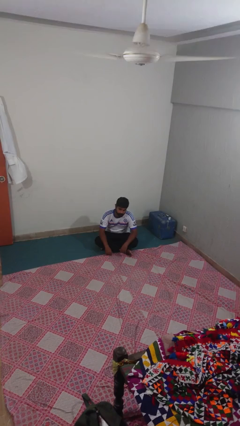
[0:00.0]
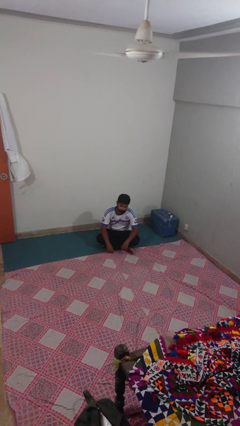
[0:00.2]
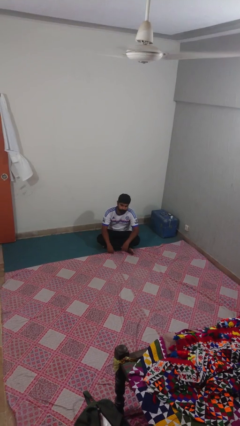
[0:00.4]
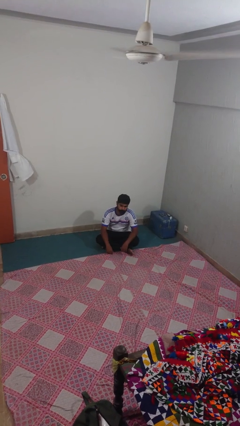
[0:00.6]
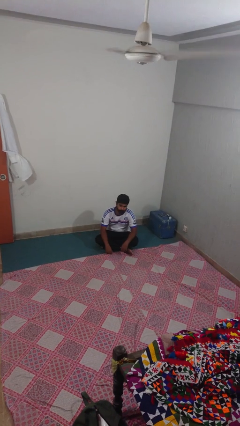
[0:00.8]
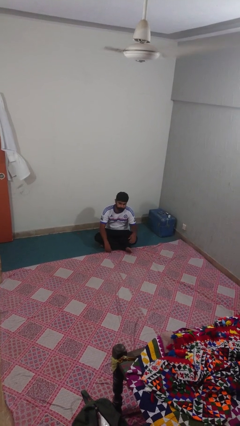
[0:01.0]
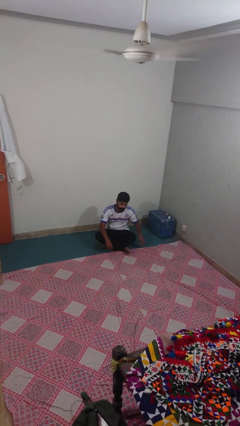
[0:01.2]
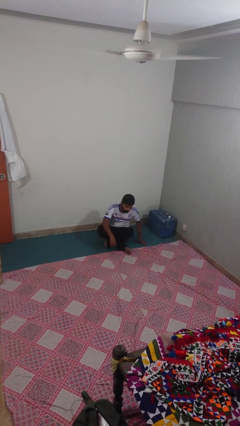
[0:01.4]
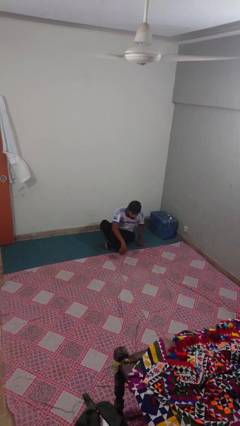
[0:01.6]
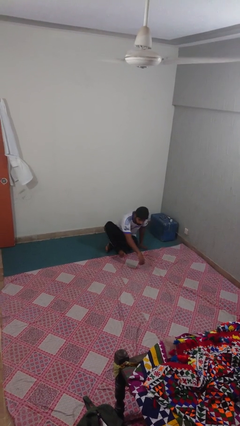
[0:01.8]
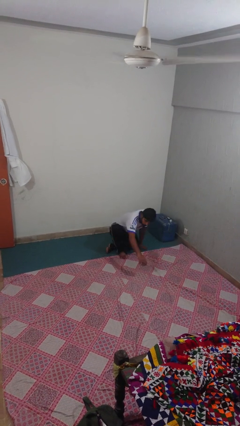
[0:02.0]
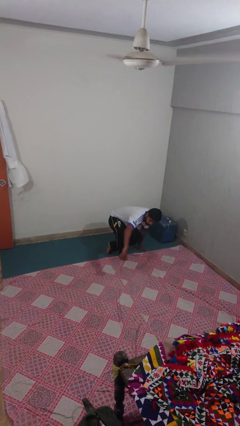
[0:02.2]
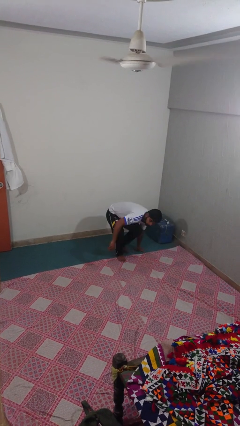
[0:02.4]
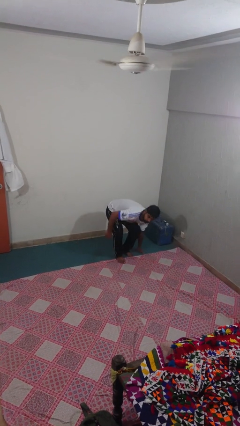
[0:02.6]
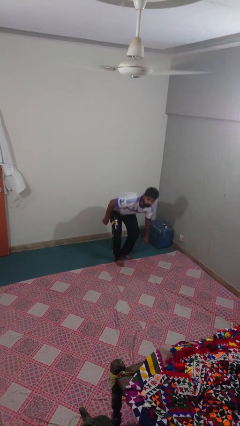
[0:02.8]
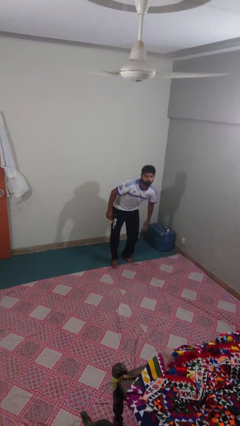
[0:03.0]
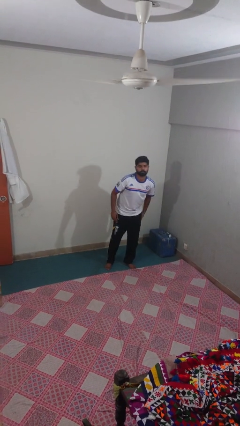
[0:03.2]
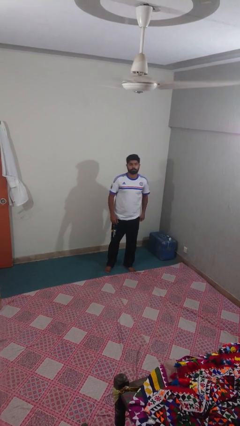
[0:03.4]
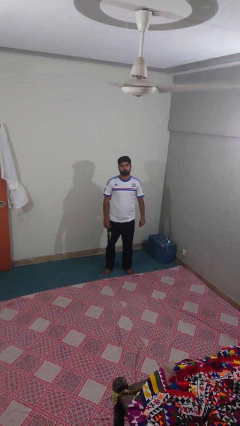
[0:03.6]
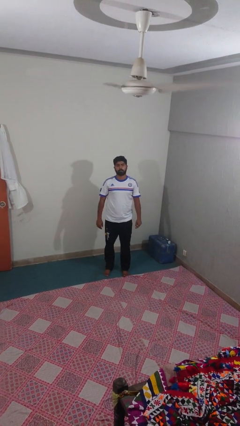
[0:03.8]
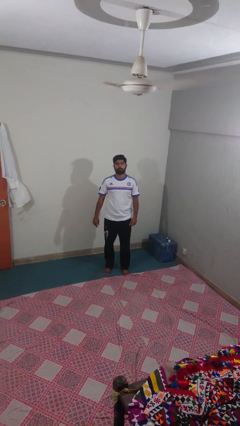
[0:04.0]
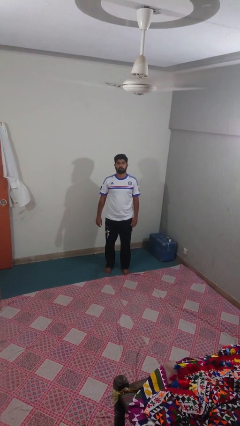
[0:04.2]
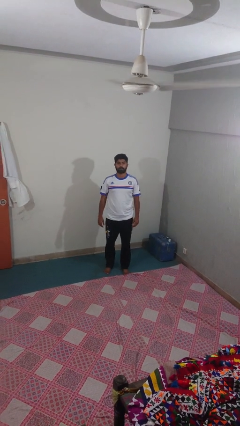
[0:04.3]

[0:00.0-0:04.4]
person stands up from floor

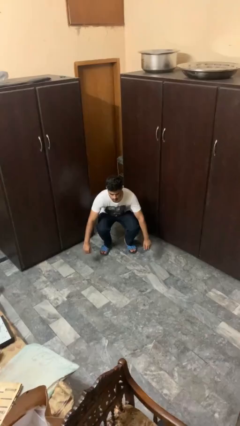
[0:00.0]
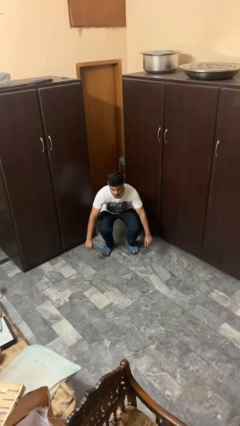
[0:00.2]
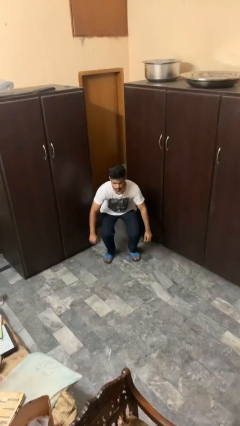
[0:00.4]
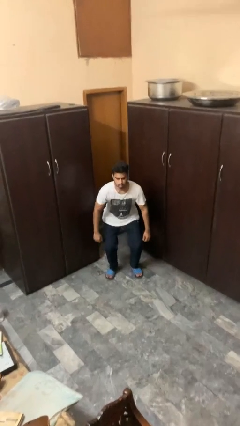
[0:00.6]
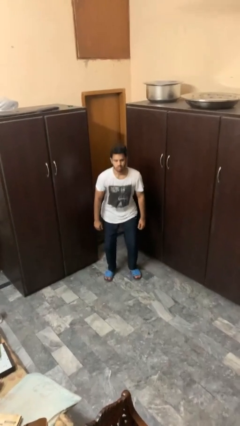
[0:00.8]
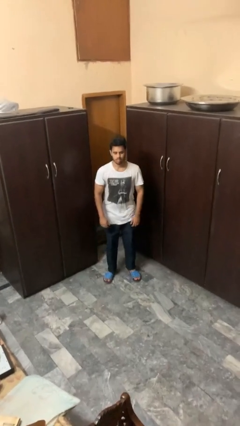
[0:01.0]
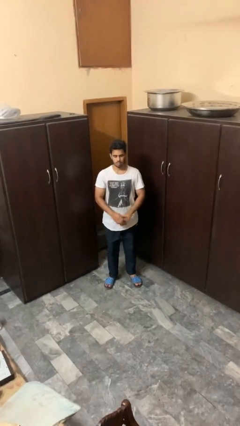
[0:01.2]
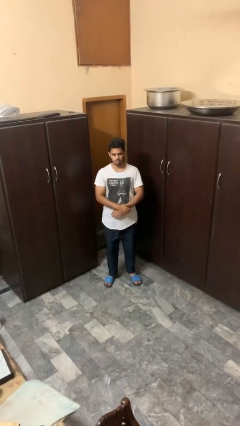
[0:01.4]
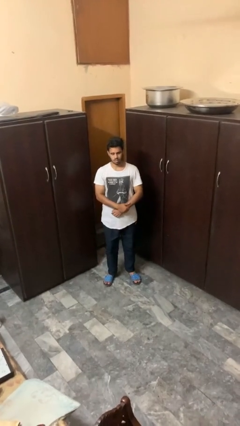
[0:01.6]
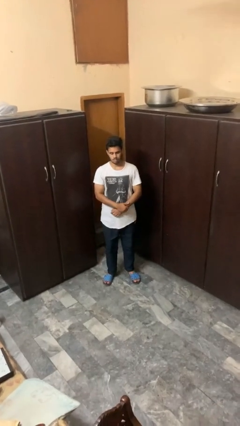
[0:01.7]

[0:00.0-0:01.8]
person stands up

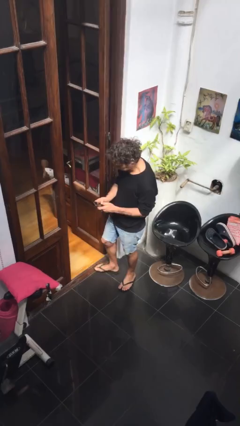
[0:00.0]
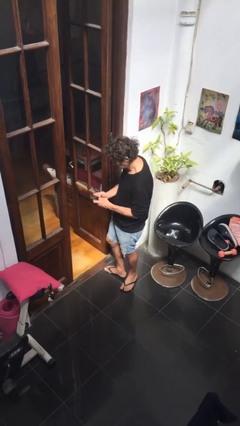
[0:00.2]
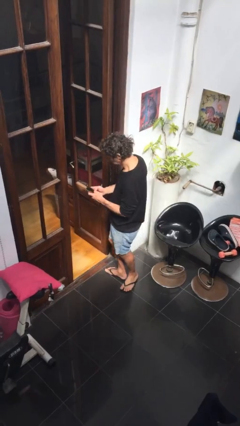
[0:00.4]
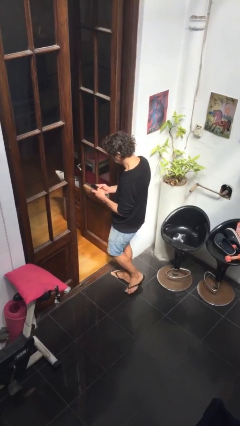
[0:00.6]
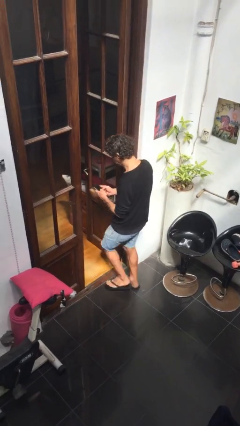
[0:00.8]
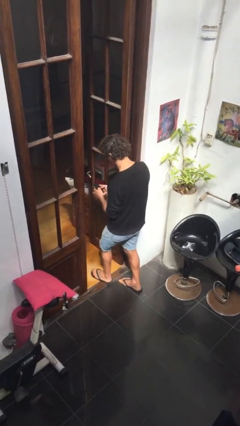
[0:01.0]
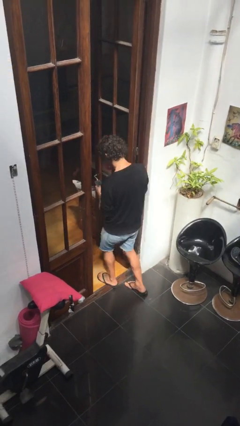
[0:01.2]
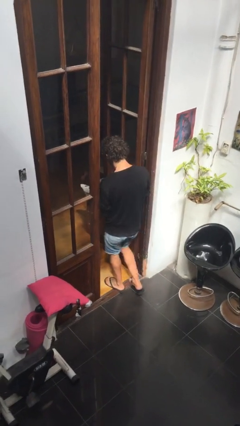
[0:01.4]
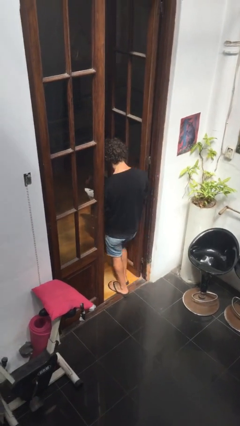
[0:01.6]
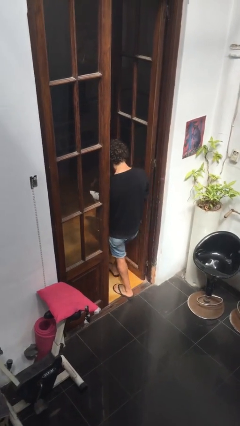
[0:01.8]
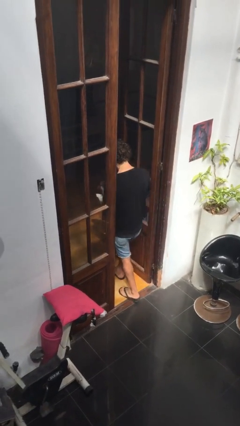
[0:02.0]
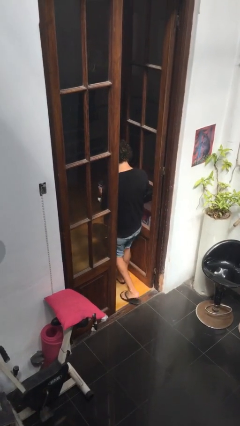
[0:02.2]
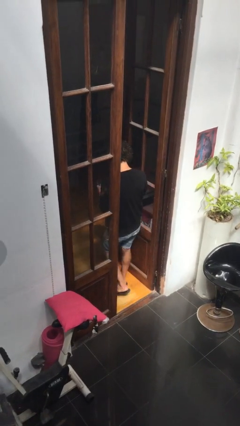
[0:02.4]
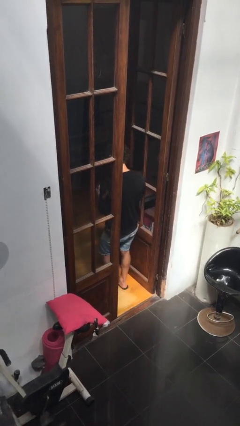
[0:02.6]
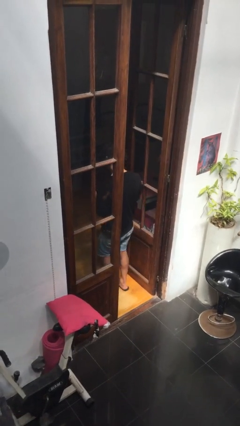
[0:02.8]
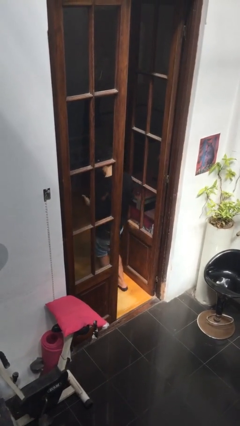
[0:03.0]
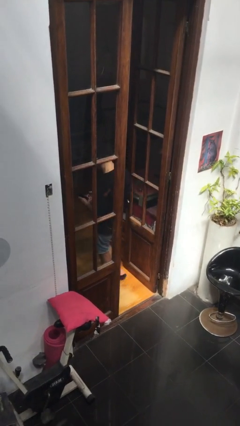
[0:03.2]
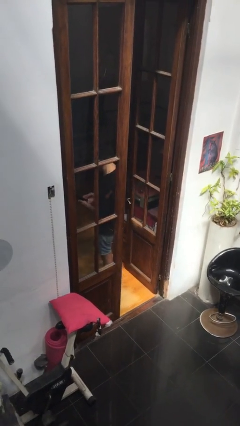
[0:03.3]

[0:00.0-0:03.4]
person exits scene through structure

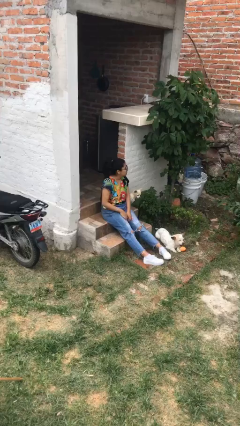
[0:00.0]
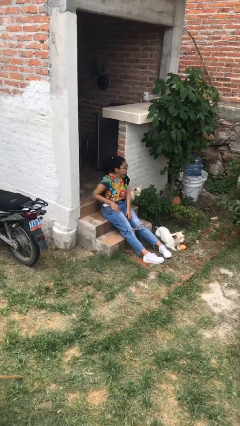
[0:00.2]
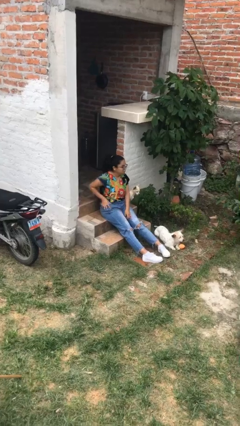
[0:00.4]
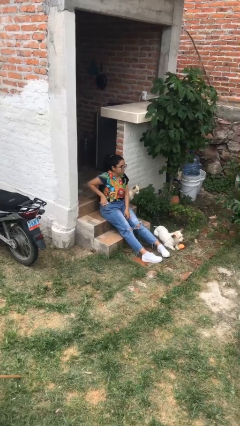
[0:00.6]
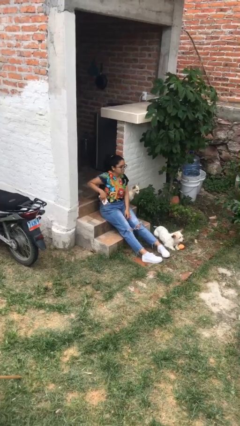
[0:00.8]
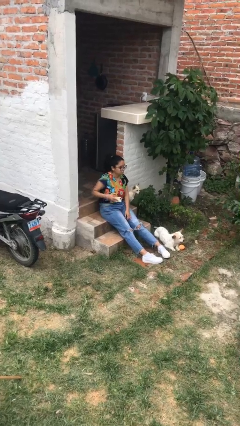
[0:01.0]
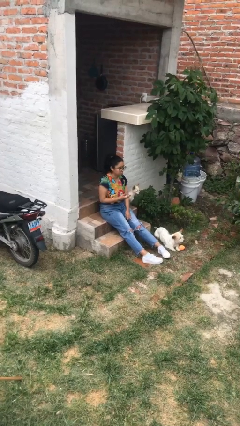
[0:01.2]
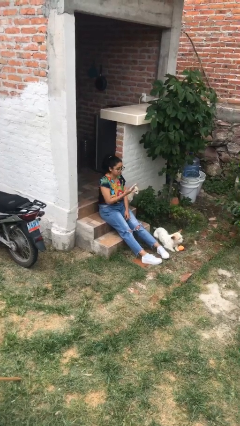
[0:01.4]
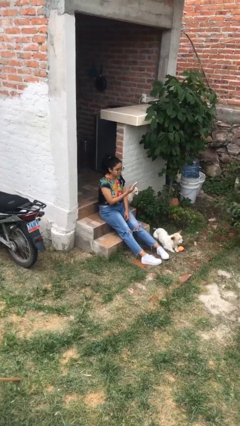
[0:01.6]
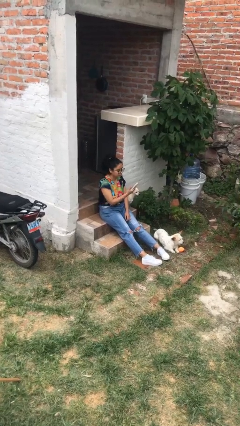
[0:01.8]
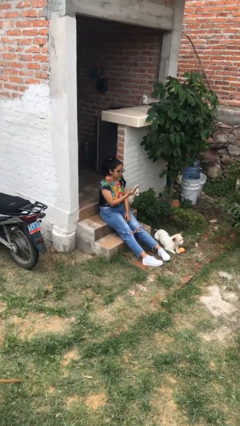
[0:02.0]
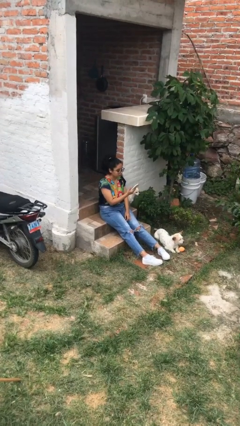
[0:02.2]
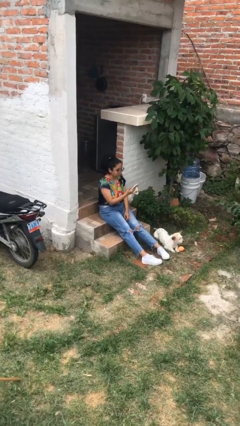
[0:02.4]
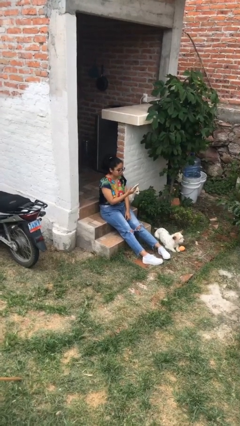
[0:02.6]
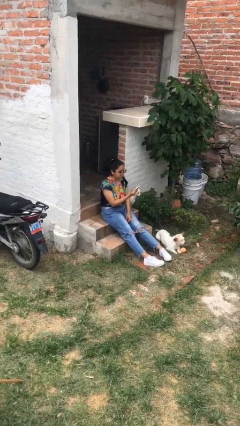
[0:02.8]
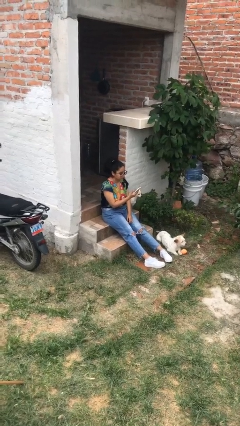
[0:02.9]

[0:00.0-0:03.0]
person takes phone from pocket

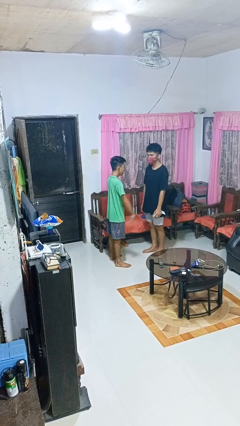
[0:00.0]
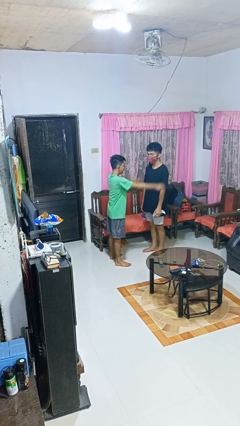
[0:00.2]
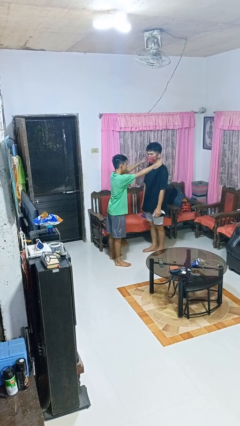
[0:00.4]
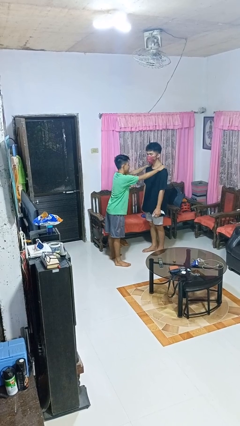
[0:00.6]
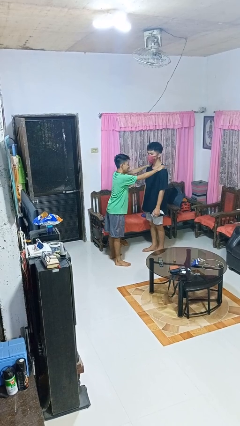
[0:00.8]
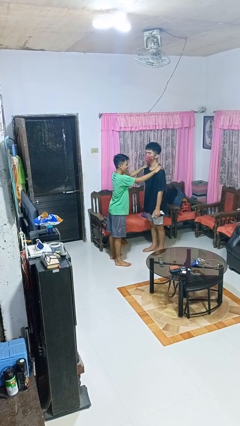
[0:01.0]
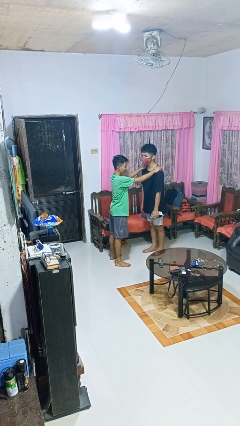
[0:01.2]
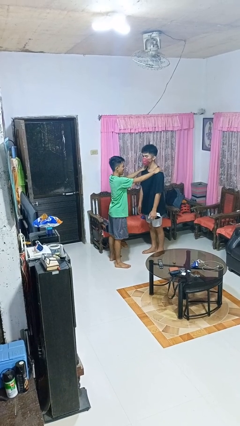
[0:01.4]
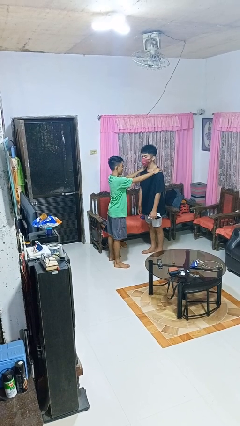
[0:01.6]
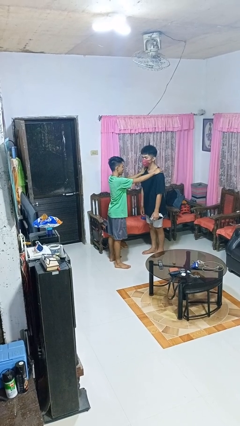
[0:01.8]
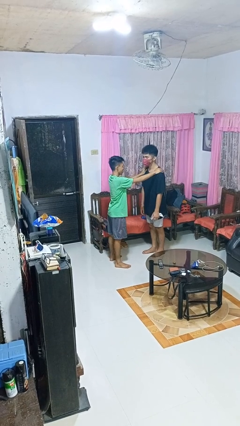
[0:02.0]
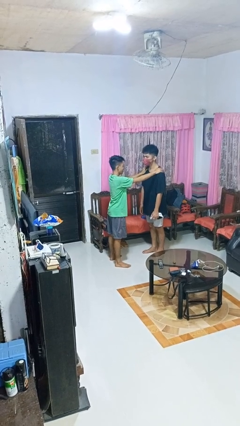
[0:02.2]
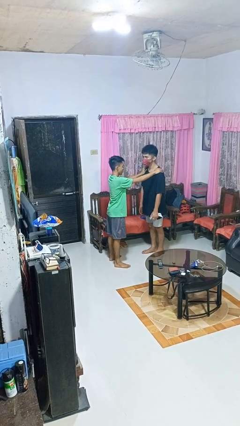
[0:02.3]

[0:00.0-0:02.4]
person grabs person by shoulder

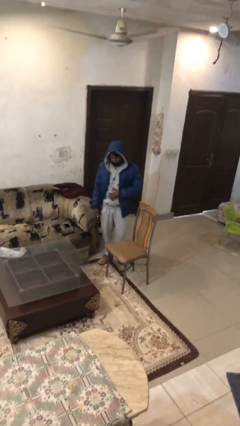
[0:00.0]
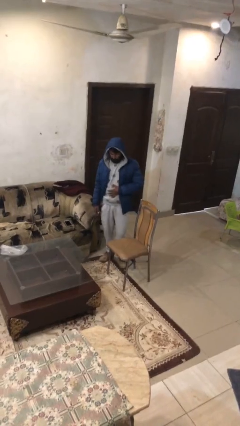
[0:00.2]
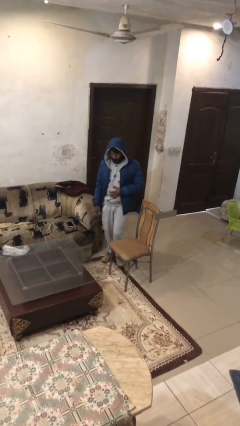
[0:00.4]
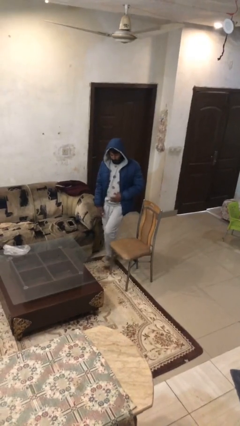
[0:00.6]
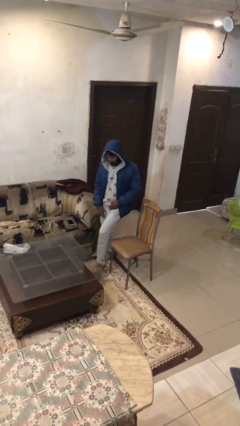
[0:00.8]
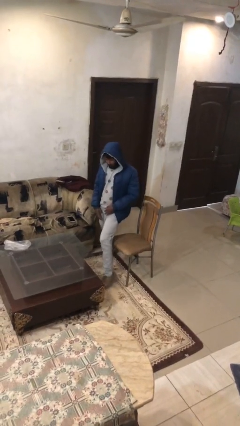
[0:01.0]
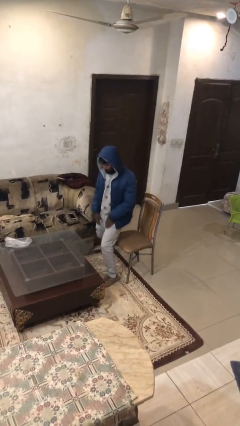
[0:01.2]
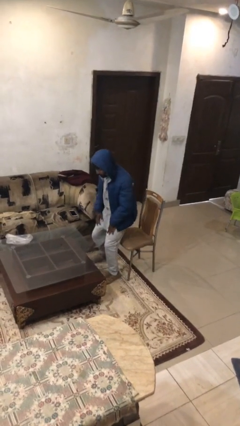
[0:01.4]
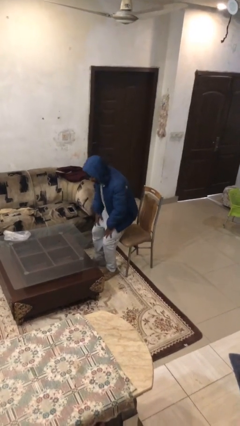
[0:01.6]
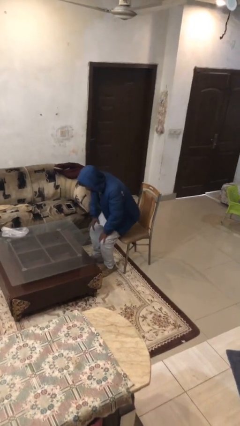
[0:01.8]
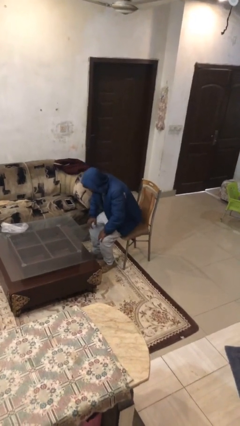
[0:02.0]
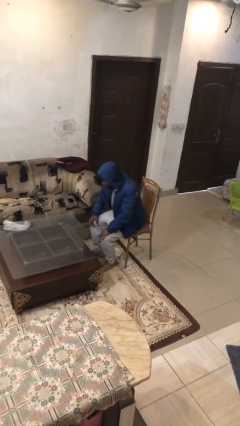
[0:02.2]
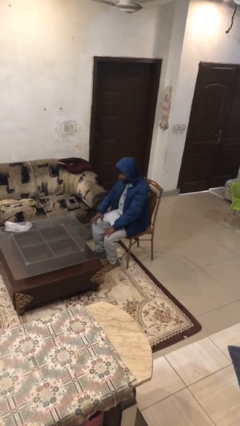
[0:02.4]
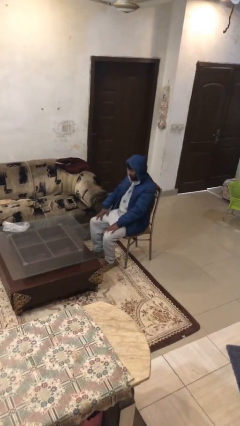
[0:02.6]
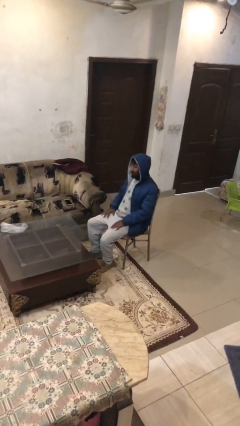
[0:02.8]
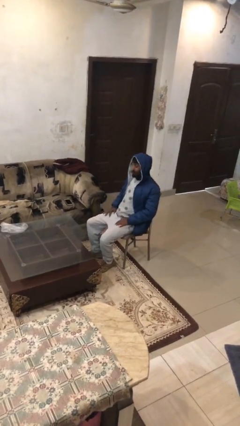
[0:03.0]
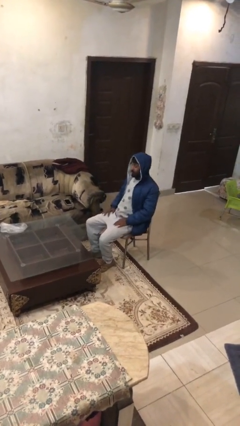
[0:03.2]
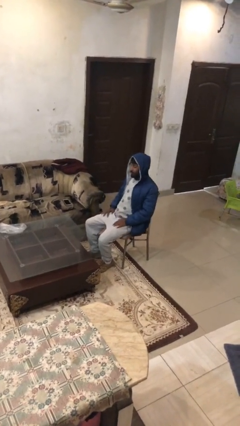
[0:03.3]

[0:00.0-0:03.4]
person sits down
